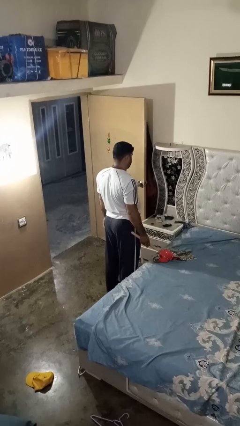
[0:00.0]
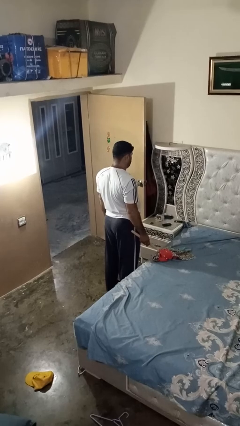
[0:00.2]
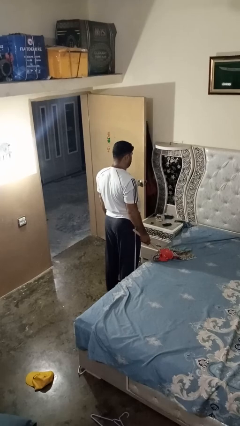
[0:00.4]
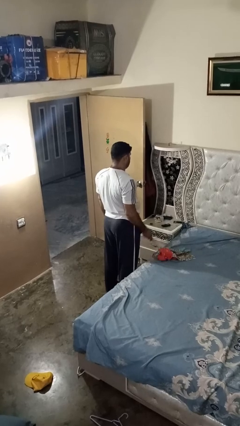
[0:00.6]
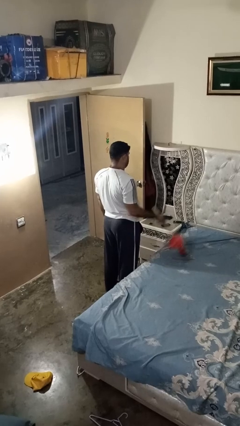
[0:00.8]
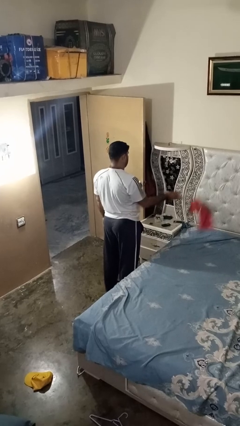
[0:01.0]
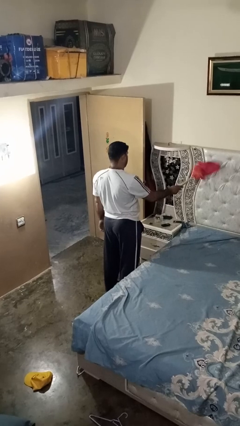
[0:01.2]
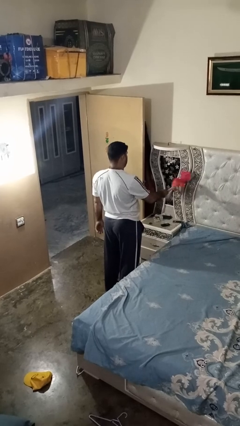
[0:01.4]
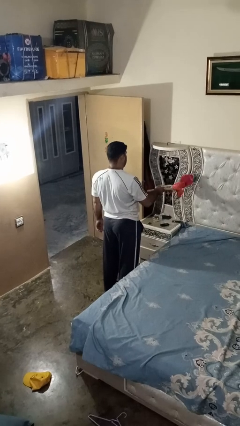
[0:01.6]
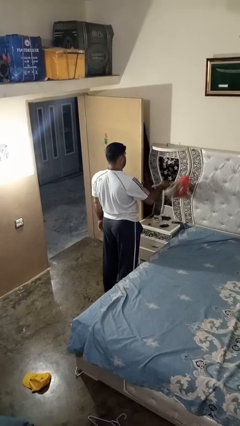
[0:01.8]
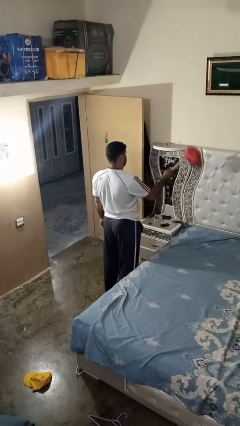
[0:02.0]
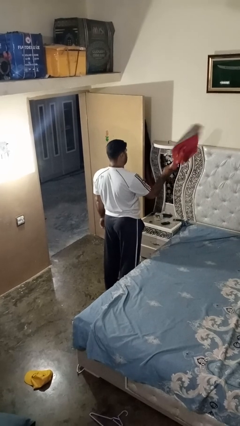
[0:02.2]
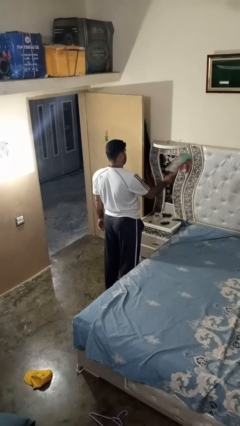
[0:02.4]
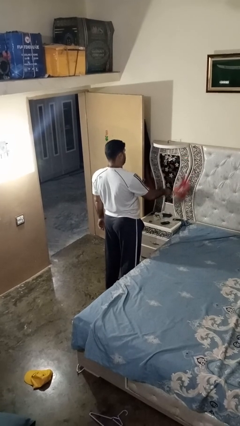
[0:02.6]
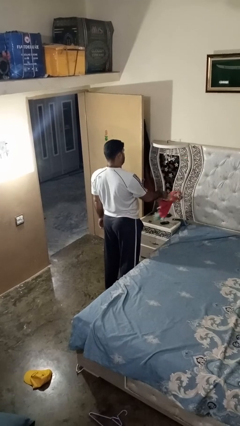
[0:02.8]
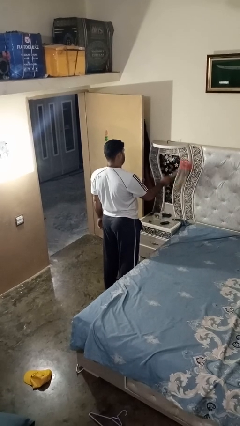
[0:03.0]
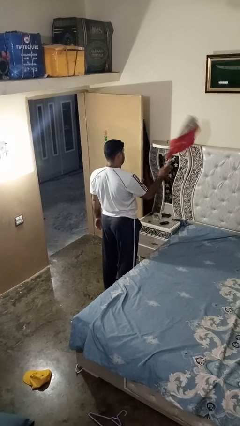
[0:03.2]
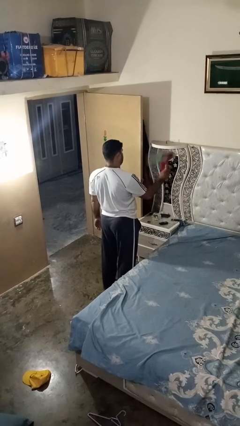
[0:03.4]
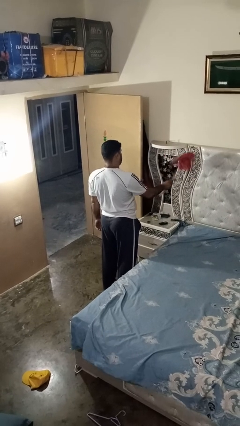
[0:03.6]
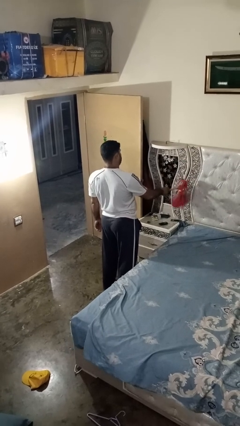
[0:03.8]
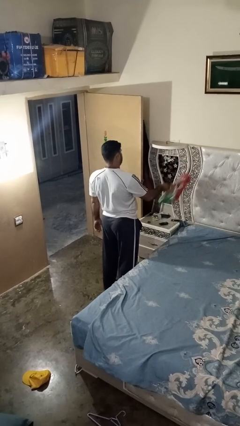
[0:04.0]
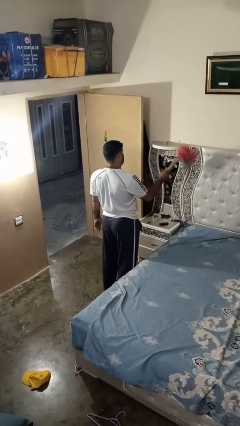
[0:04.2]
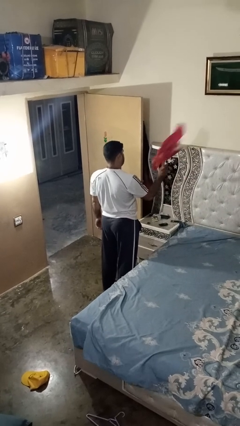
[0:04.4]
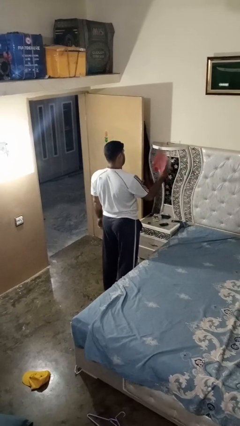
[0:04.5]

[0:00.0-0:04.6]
person dusts furniture

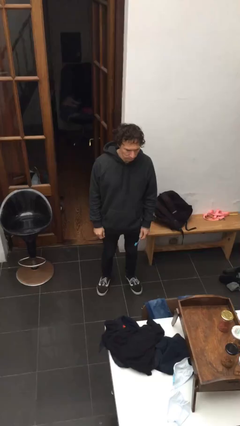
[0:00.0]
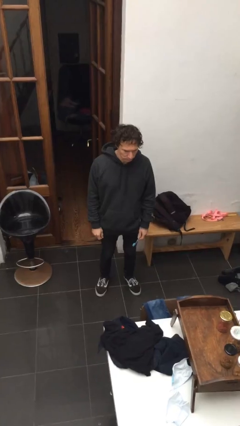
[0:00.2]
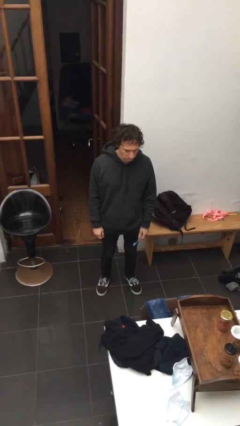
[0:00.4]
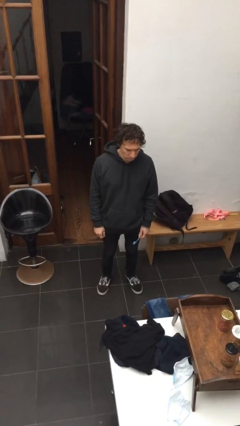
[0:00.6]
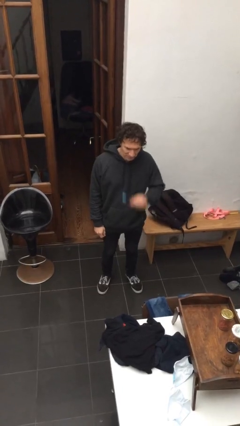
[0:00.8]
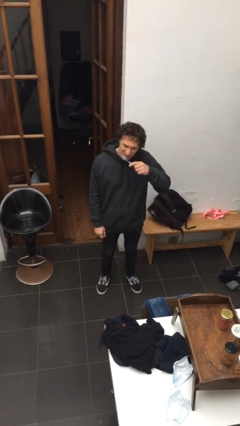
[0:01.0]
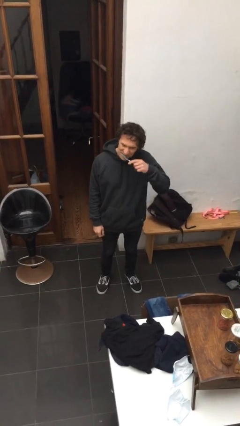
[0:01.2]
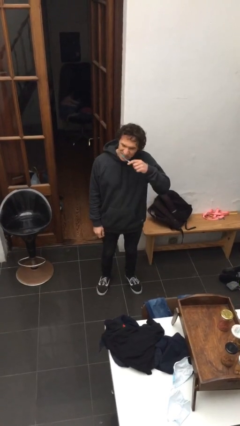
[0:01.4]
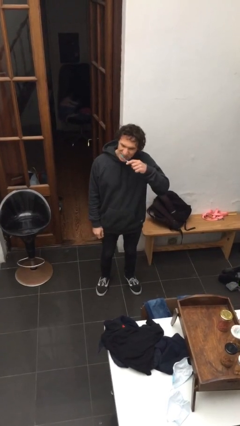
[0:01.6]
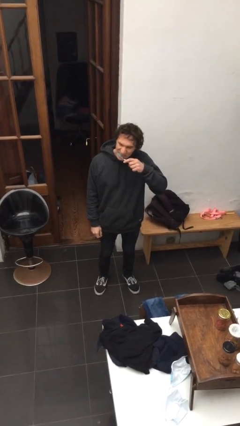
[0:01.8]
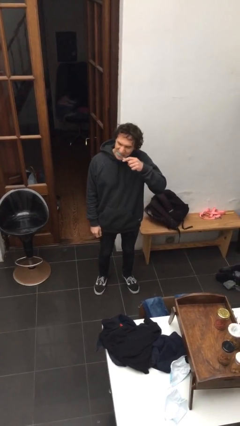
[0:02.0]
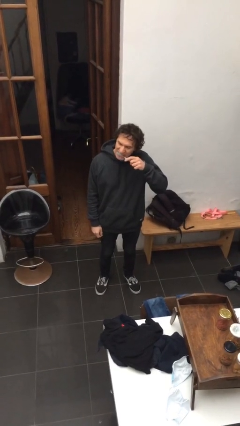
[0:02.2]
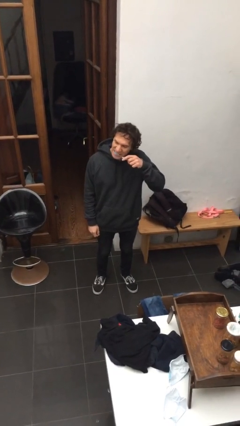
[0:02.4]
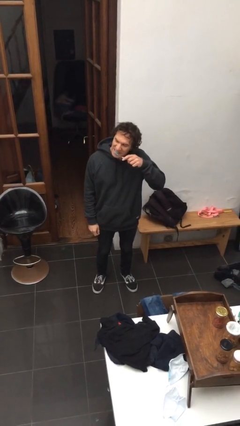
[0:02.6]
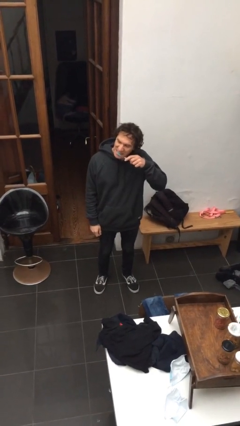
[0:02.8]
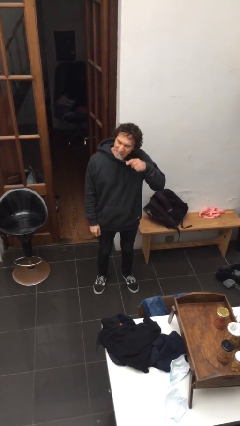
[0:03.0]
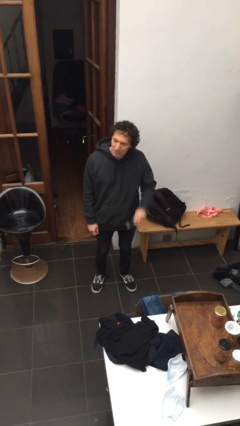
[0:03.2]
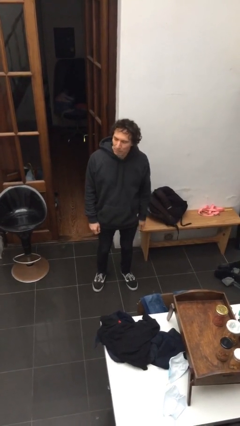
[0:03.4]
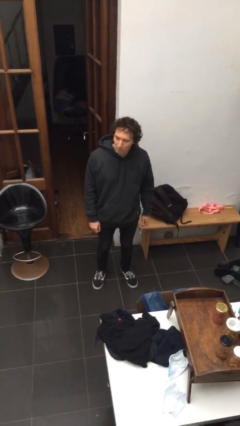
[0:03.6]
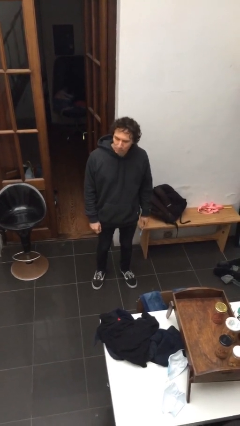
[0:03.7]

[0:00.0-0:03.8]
person flosses

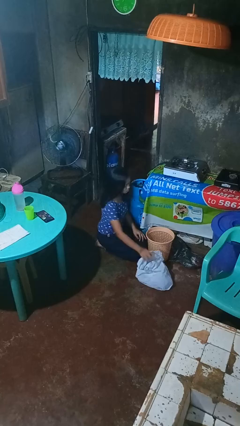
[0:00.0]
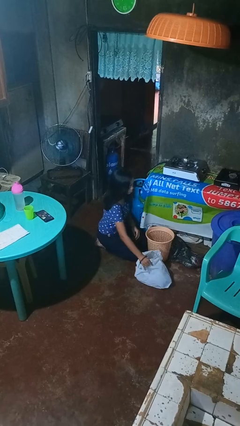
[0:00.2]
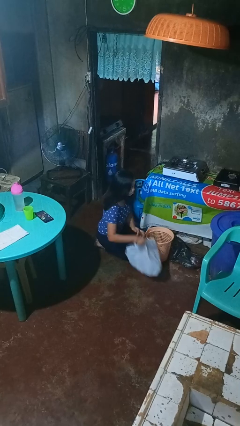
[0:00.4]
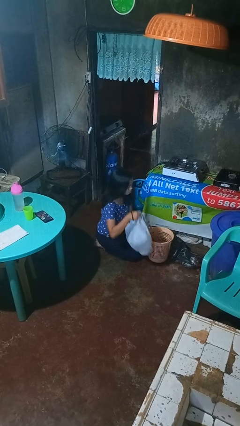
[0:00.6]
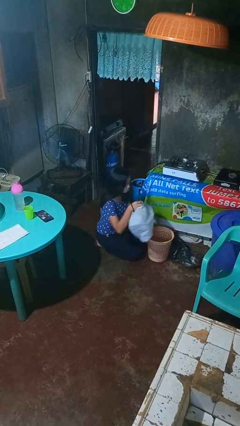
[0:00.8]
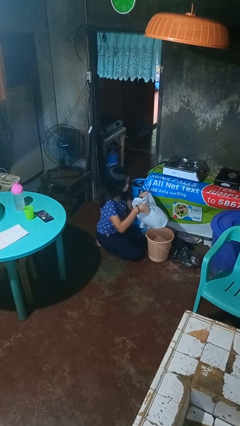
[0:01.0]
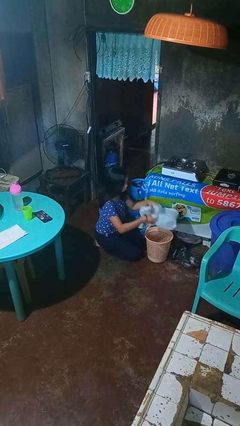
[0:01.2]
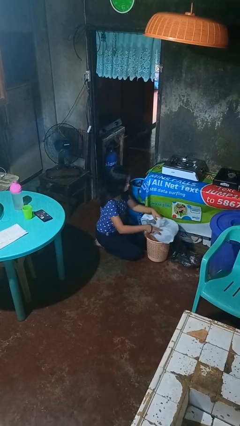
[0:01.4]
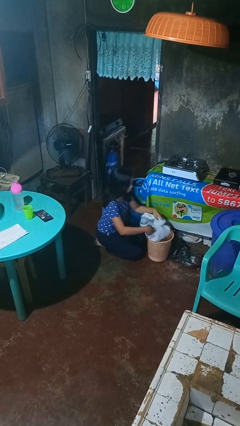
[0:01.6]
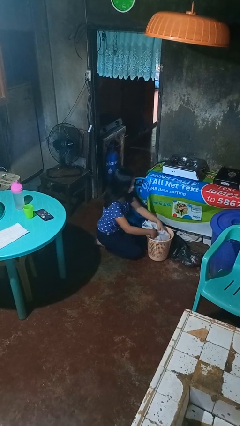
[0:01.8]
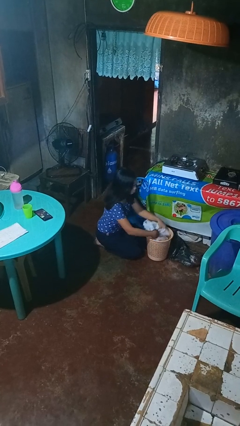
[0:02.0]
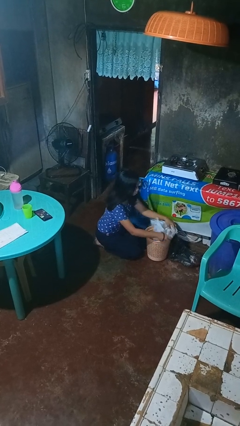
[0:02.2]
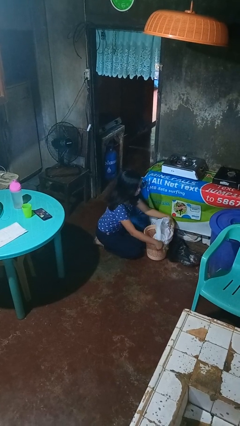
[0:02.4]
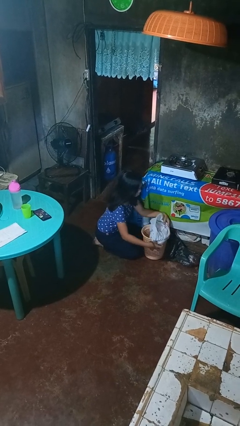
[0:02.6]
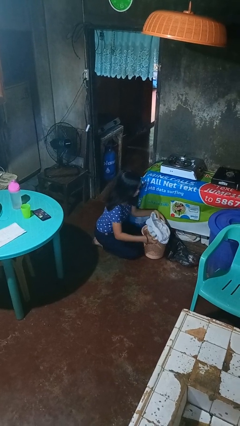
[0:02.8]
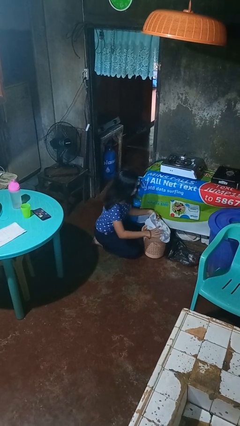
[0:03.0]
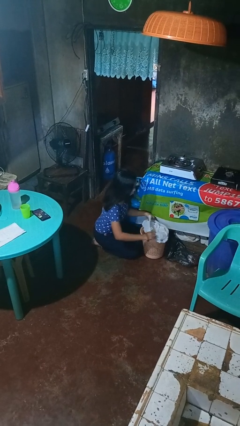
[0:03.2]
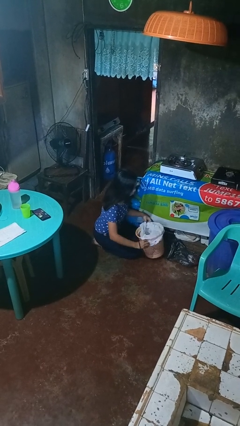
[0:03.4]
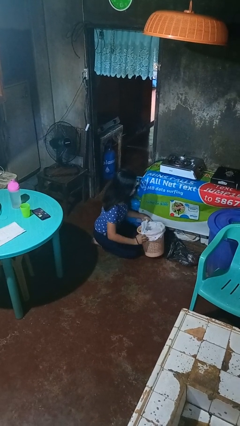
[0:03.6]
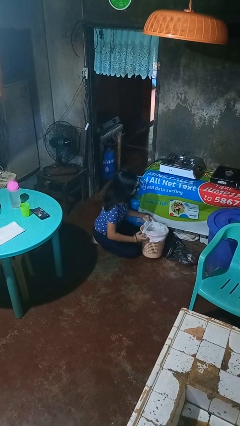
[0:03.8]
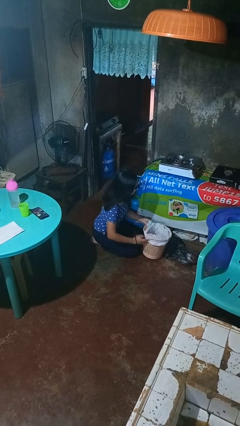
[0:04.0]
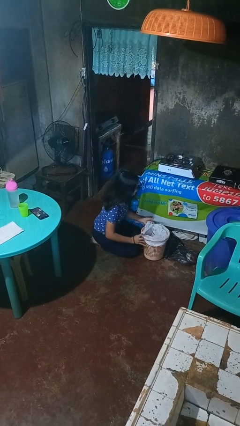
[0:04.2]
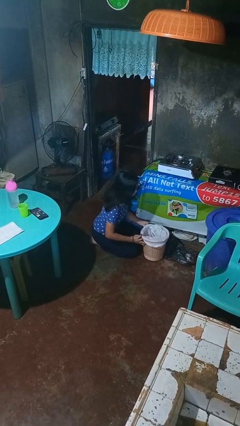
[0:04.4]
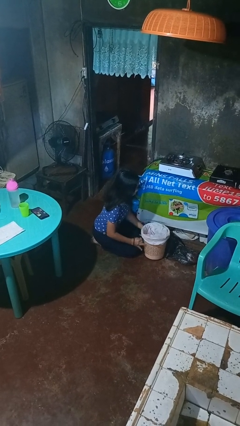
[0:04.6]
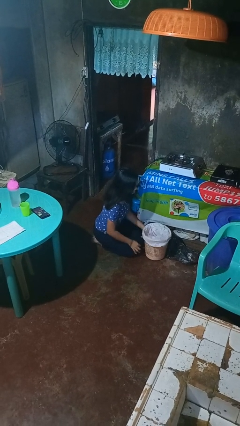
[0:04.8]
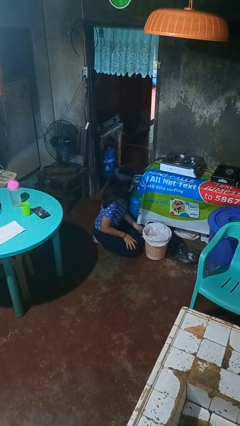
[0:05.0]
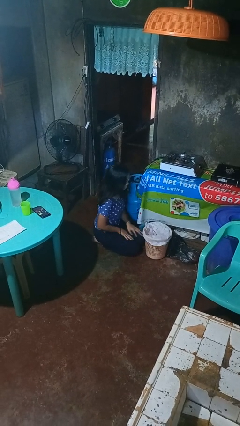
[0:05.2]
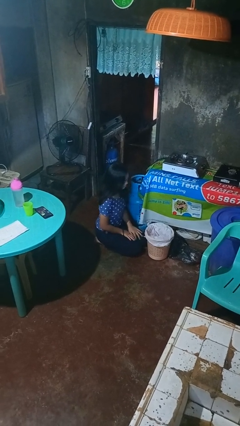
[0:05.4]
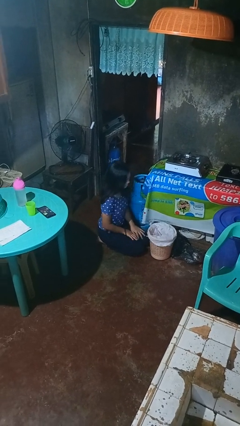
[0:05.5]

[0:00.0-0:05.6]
person inserts trashbag into trashcan

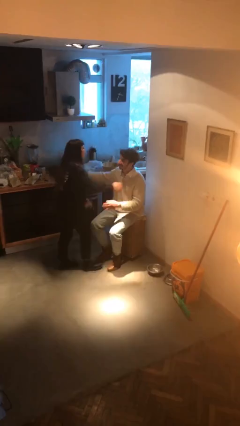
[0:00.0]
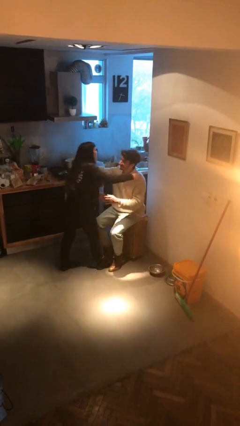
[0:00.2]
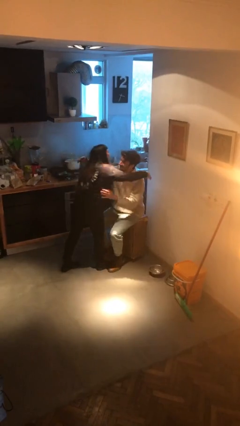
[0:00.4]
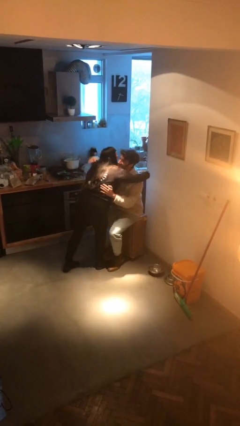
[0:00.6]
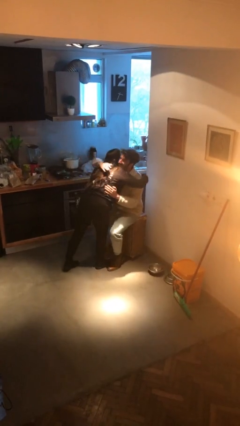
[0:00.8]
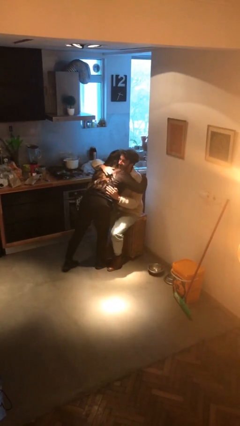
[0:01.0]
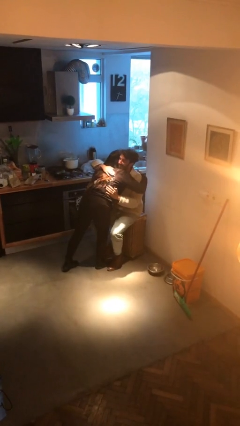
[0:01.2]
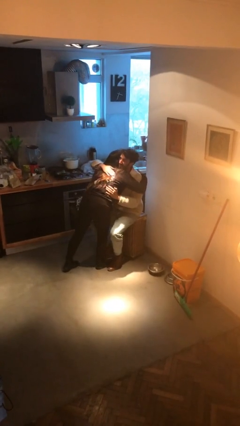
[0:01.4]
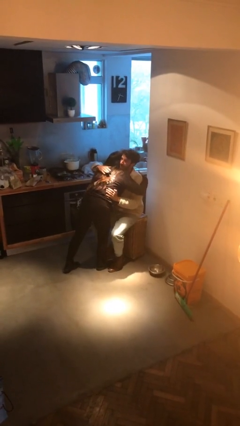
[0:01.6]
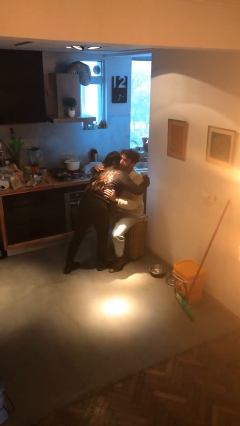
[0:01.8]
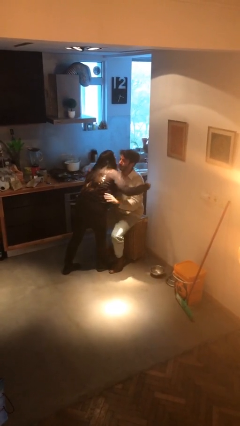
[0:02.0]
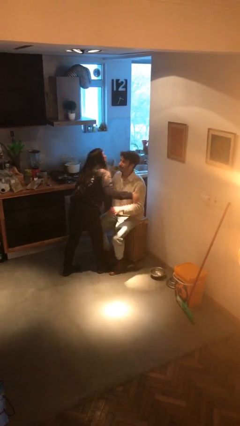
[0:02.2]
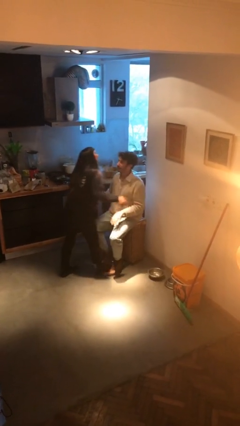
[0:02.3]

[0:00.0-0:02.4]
person embraces person

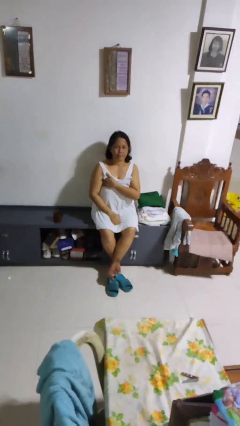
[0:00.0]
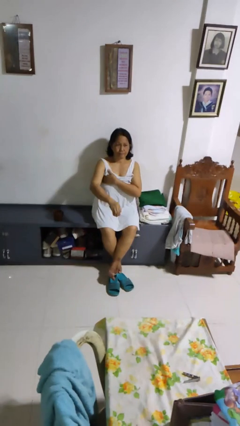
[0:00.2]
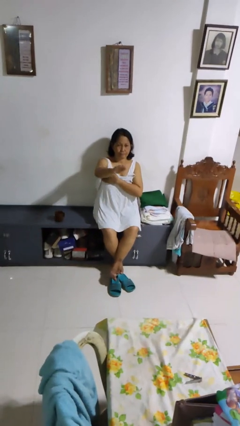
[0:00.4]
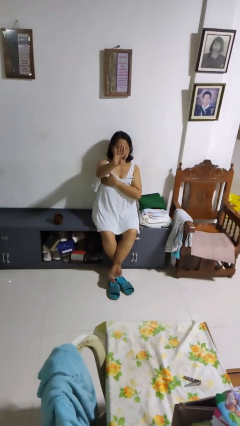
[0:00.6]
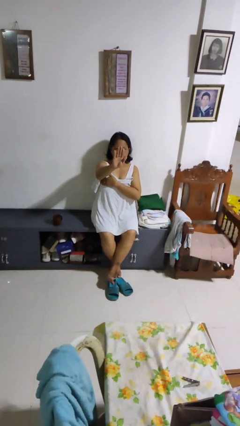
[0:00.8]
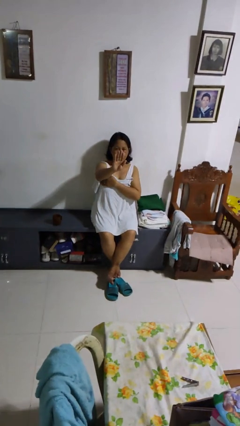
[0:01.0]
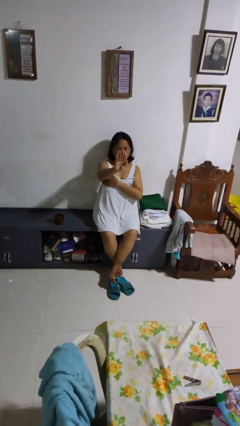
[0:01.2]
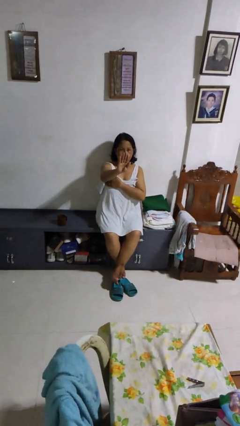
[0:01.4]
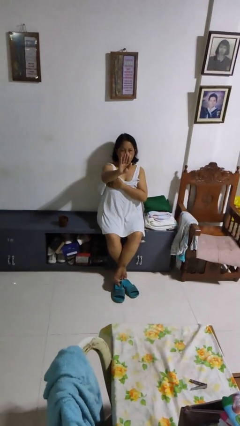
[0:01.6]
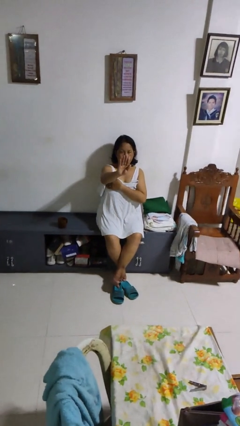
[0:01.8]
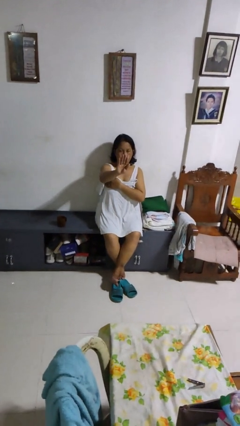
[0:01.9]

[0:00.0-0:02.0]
person gestures stop
